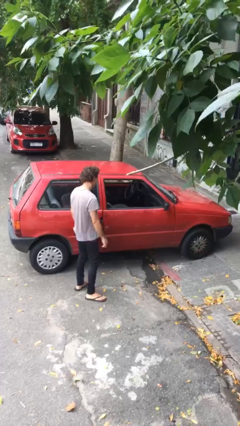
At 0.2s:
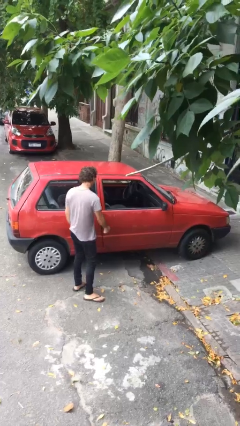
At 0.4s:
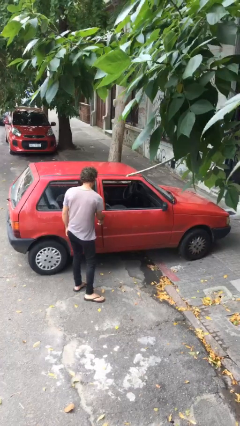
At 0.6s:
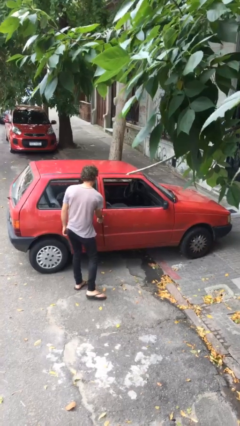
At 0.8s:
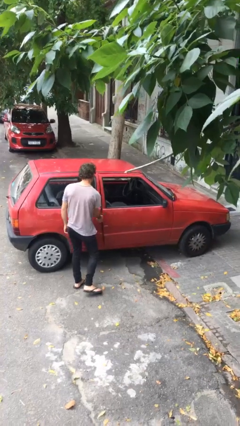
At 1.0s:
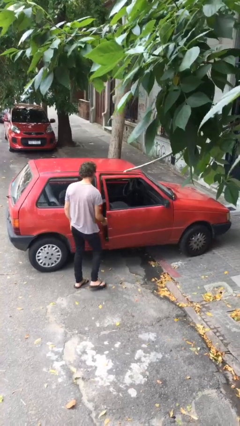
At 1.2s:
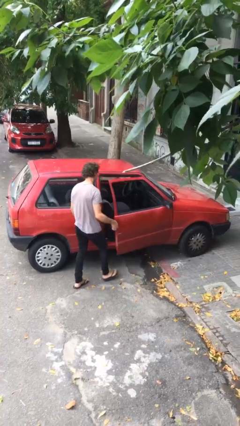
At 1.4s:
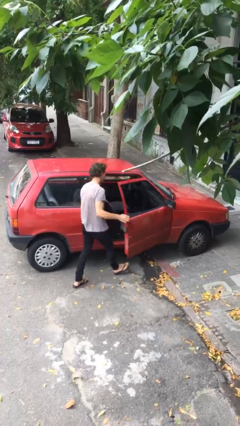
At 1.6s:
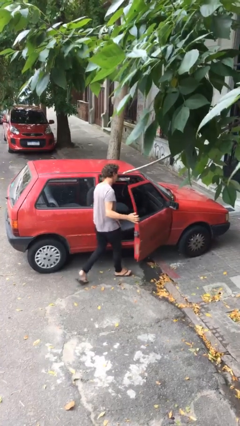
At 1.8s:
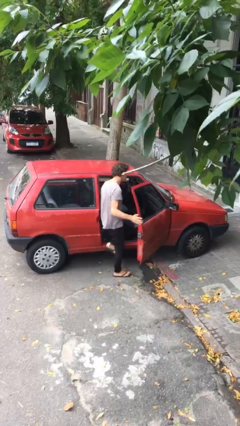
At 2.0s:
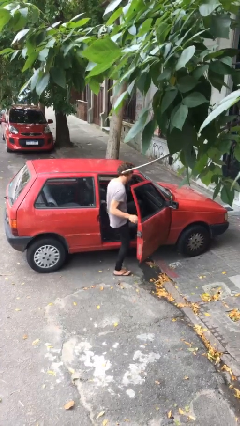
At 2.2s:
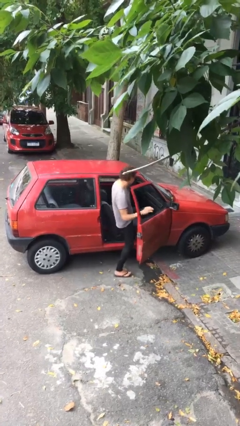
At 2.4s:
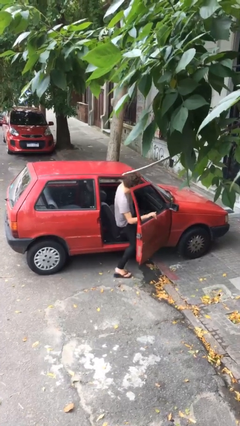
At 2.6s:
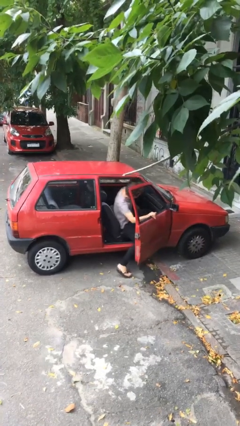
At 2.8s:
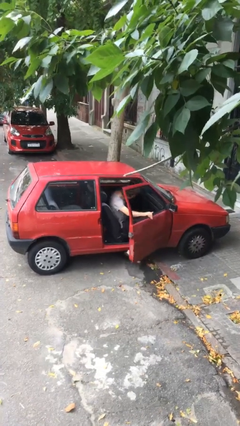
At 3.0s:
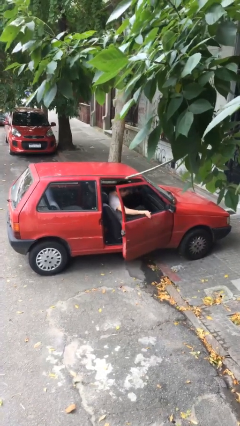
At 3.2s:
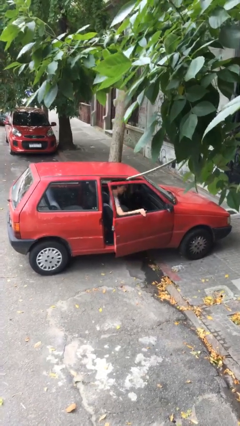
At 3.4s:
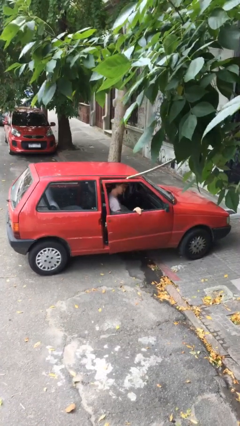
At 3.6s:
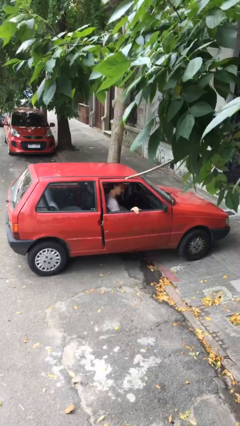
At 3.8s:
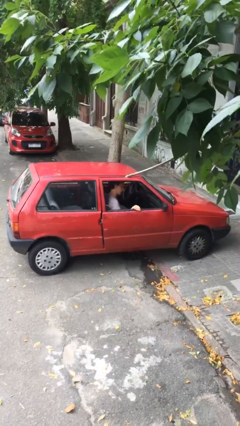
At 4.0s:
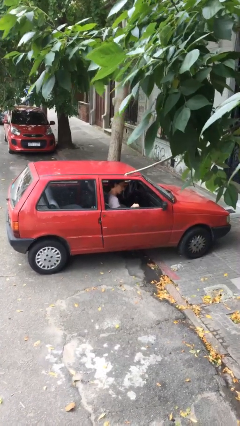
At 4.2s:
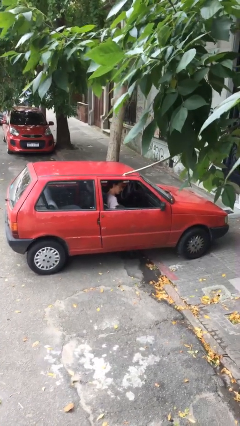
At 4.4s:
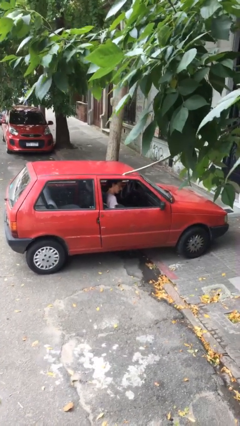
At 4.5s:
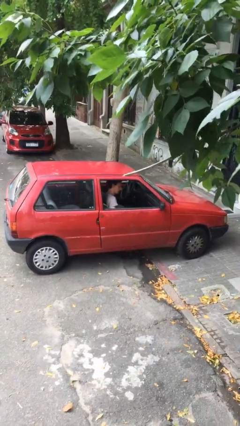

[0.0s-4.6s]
car picks up person

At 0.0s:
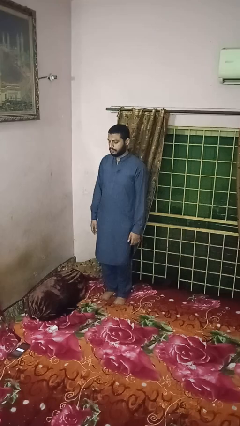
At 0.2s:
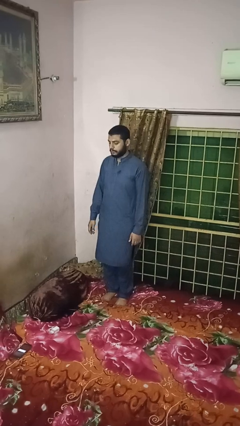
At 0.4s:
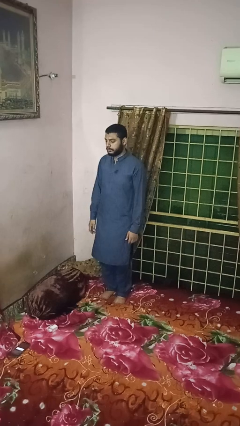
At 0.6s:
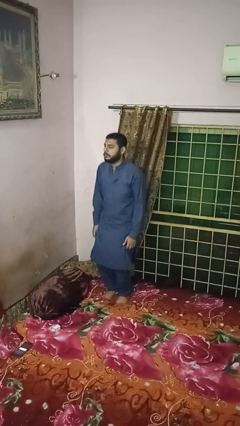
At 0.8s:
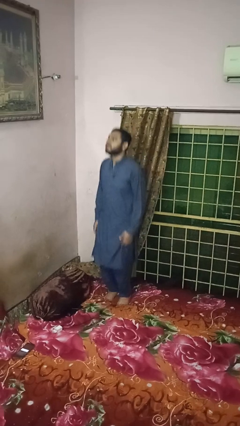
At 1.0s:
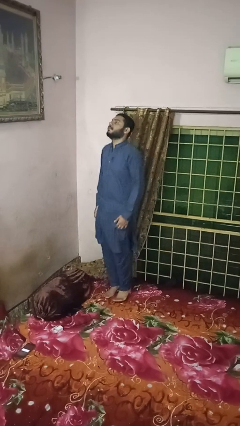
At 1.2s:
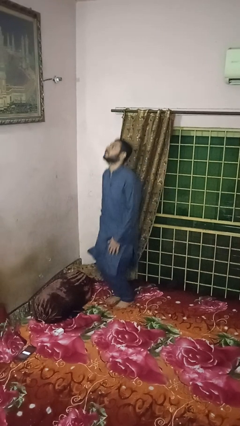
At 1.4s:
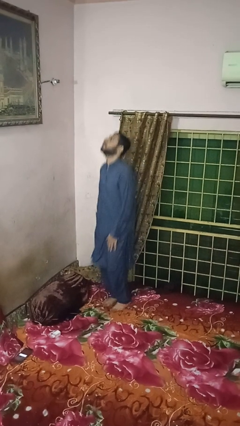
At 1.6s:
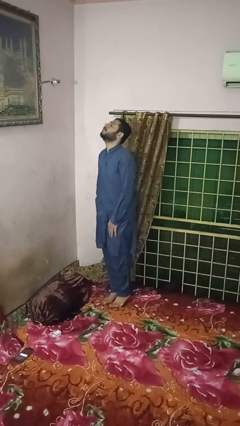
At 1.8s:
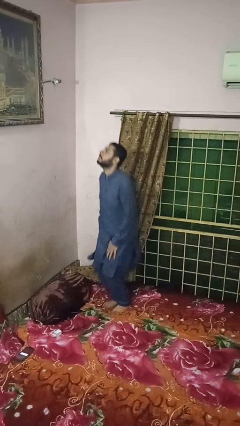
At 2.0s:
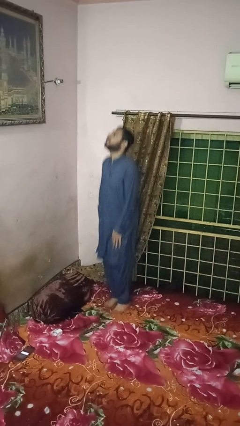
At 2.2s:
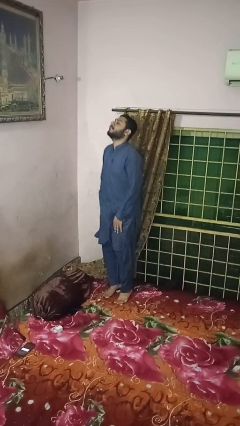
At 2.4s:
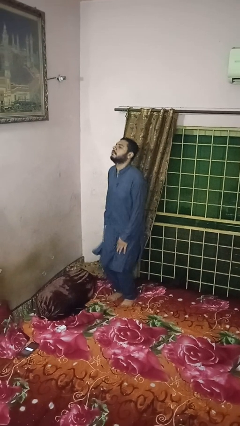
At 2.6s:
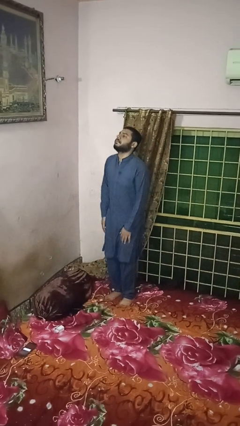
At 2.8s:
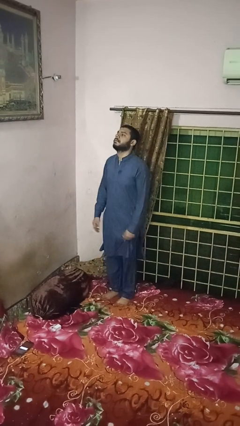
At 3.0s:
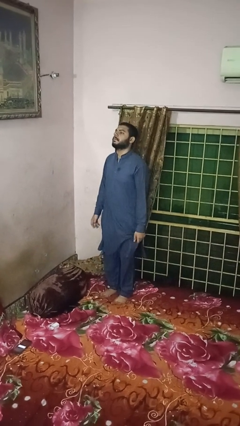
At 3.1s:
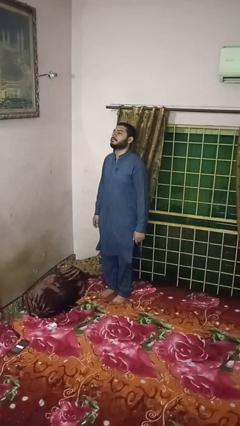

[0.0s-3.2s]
person jumps on bed

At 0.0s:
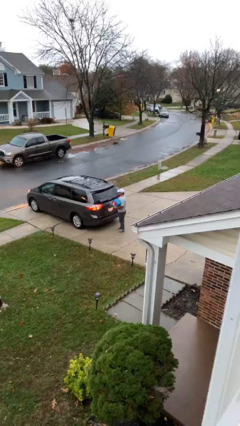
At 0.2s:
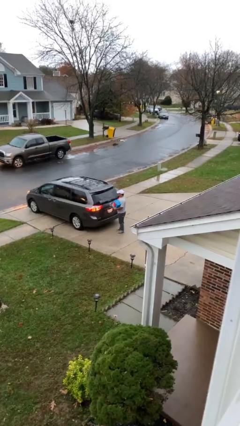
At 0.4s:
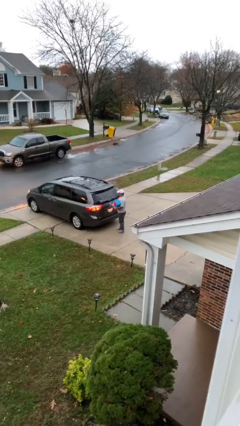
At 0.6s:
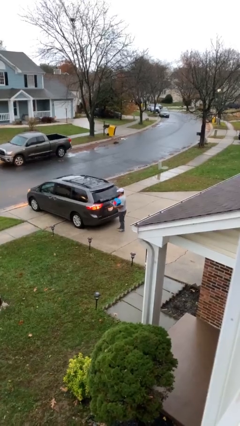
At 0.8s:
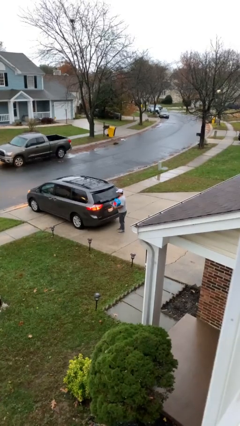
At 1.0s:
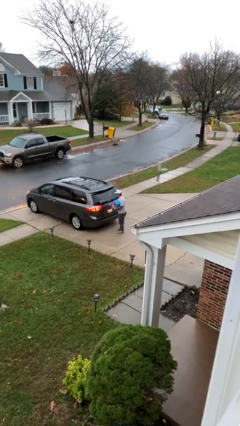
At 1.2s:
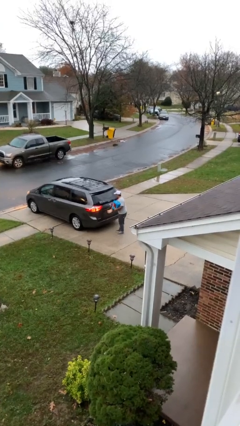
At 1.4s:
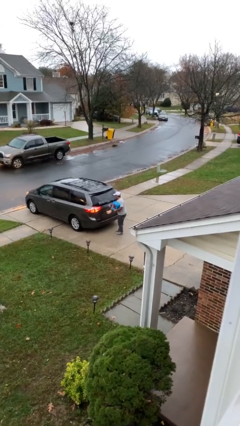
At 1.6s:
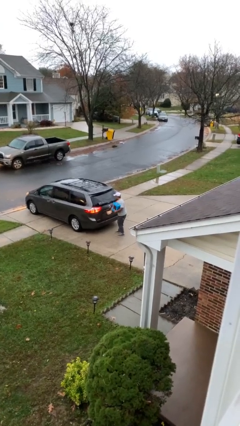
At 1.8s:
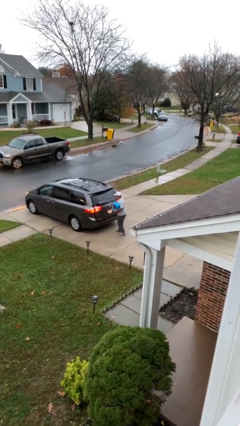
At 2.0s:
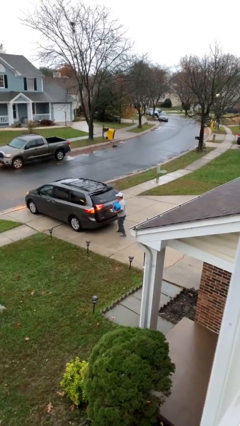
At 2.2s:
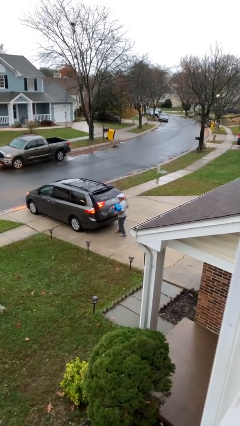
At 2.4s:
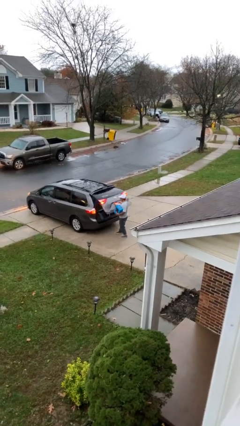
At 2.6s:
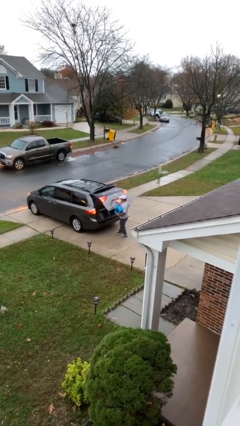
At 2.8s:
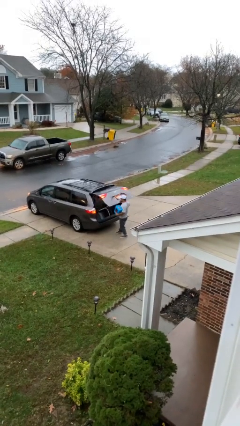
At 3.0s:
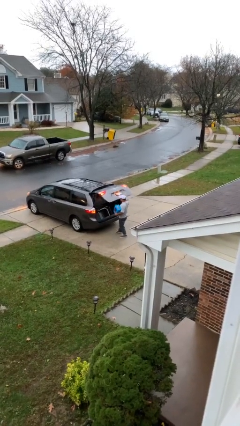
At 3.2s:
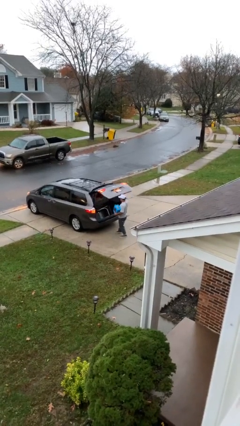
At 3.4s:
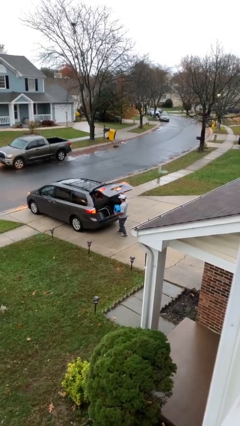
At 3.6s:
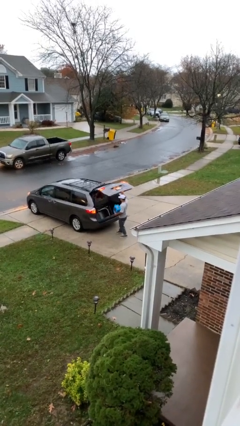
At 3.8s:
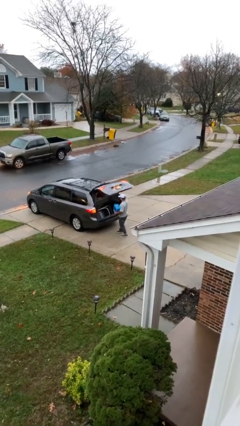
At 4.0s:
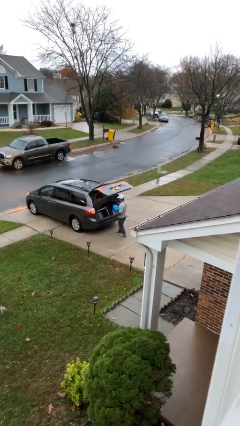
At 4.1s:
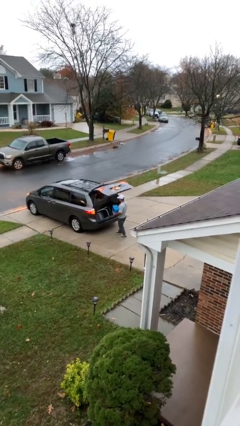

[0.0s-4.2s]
person opens car trunk

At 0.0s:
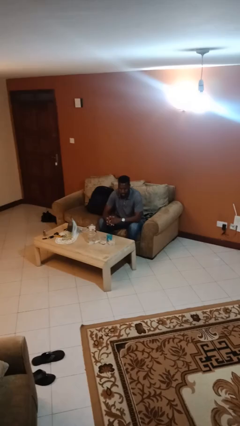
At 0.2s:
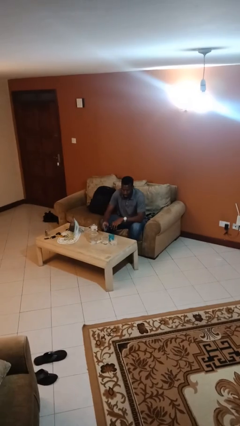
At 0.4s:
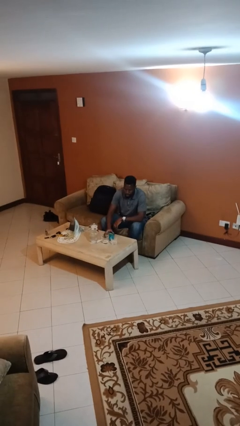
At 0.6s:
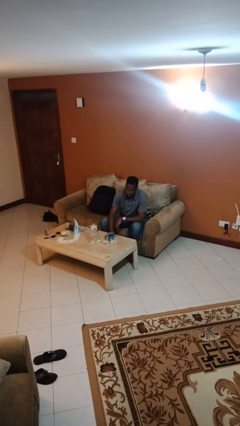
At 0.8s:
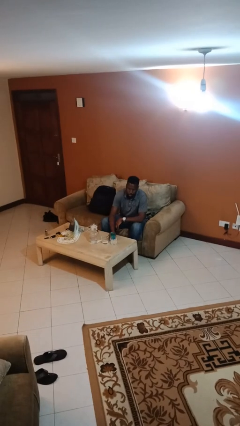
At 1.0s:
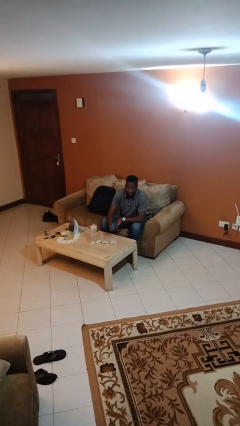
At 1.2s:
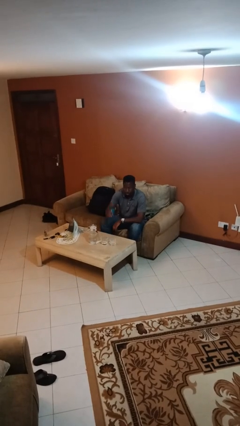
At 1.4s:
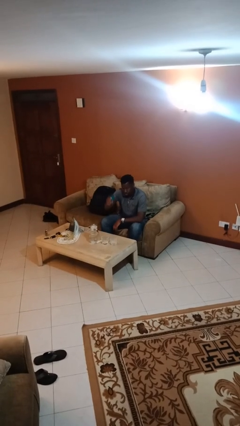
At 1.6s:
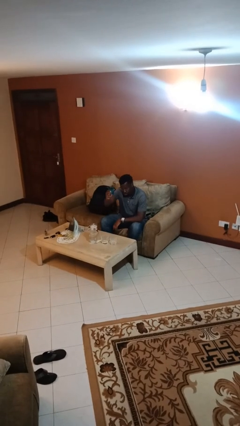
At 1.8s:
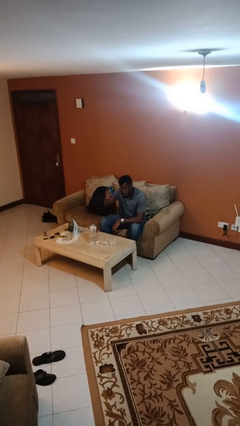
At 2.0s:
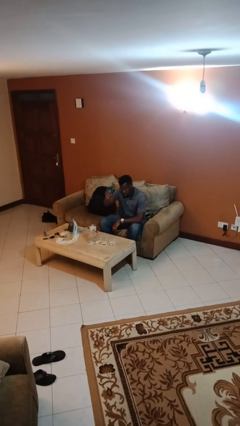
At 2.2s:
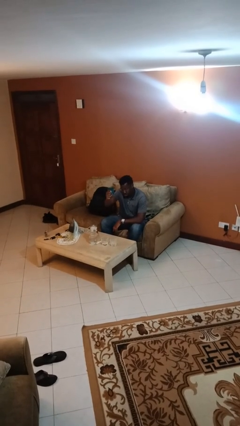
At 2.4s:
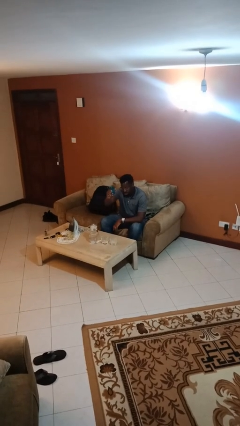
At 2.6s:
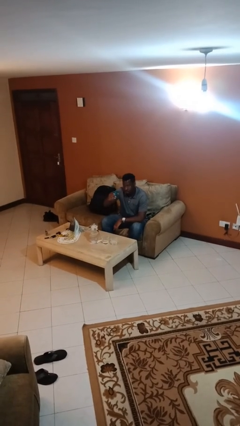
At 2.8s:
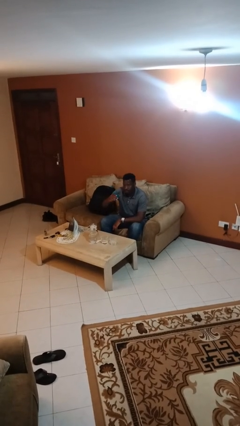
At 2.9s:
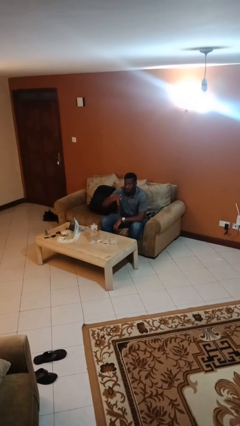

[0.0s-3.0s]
person picks up object from table

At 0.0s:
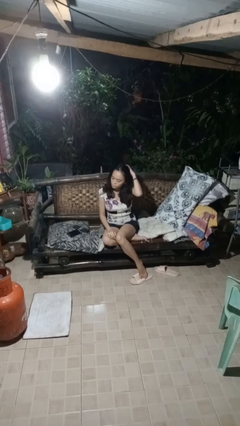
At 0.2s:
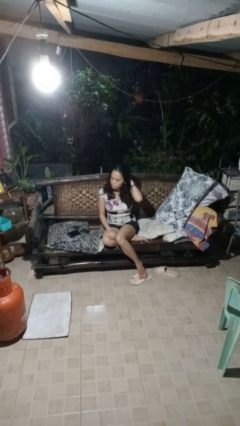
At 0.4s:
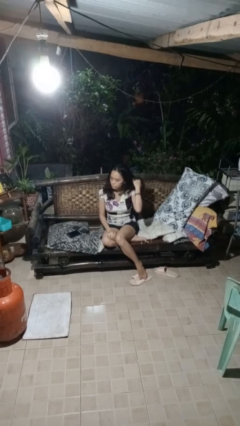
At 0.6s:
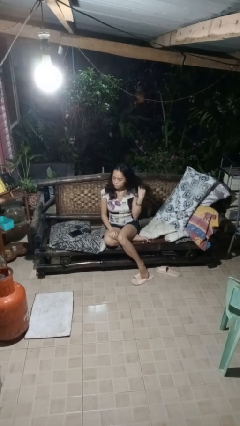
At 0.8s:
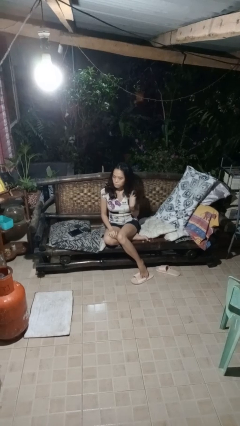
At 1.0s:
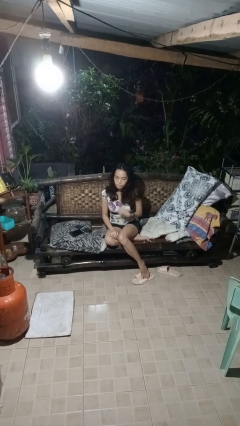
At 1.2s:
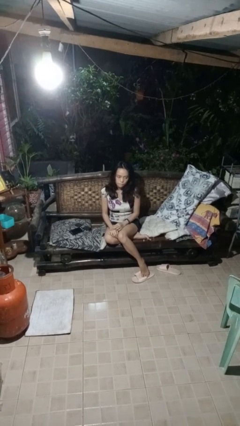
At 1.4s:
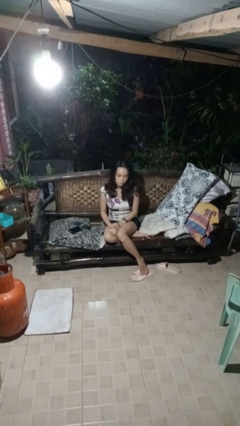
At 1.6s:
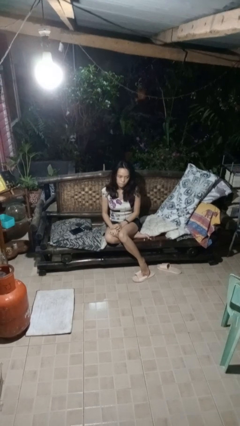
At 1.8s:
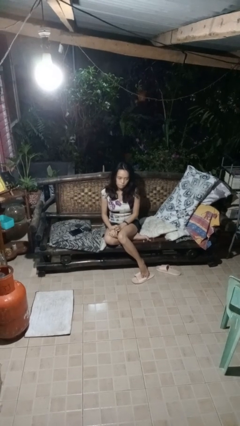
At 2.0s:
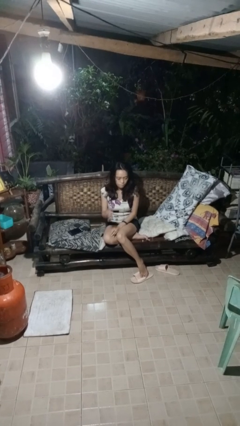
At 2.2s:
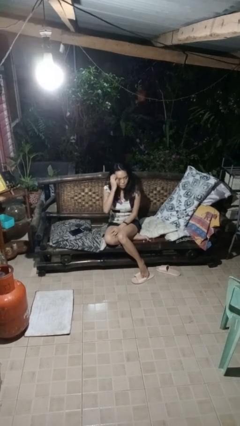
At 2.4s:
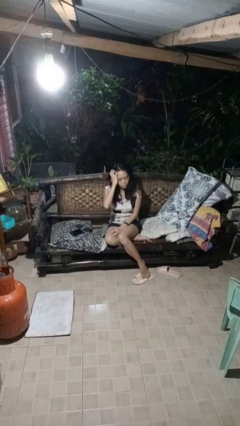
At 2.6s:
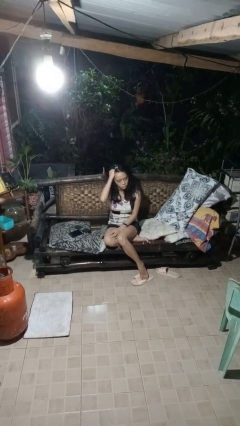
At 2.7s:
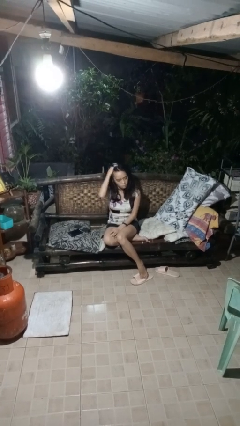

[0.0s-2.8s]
person searches in couch
